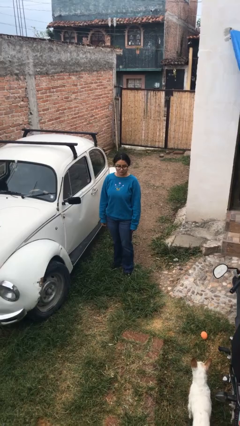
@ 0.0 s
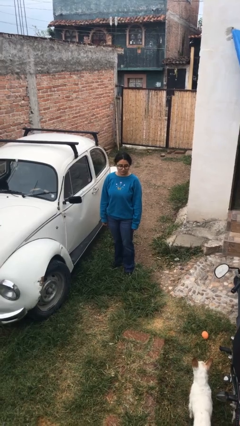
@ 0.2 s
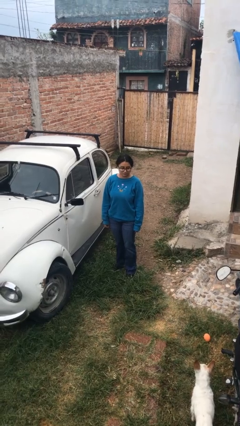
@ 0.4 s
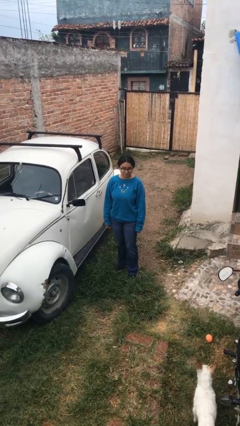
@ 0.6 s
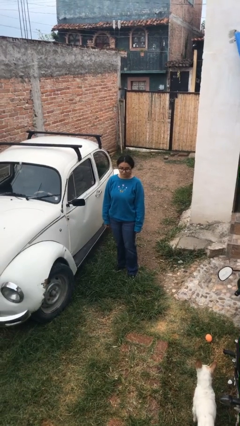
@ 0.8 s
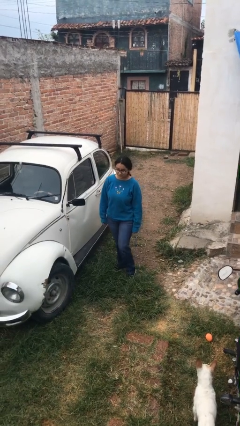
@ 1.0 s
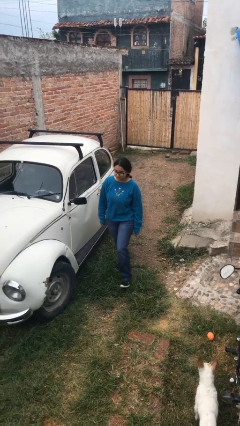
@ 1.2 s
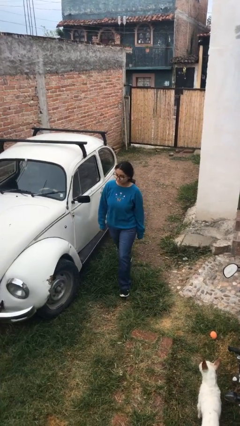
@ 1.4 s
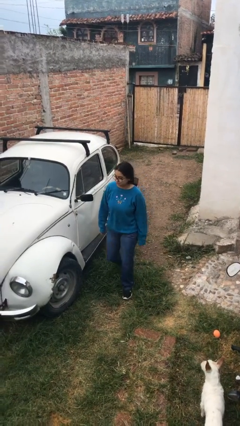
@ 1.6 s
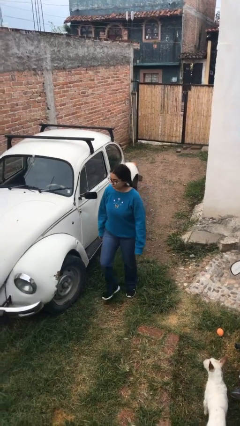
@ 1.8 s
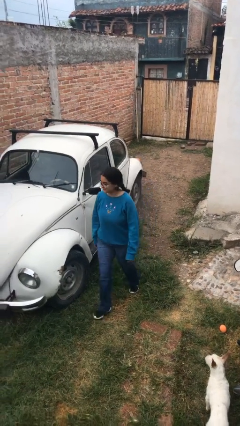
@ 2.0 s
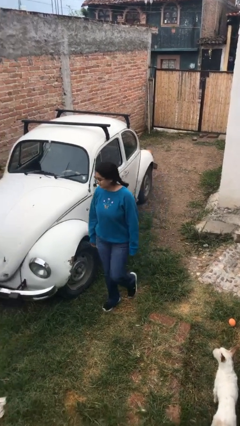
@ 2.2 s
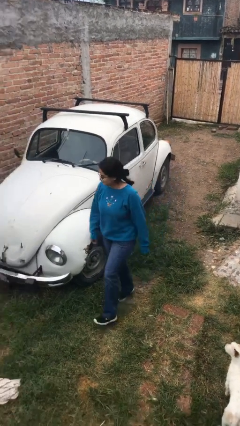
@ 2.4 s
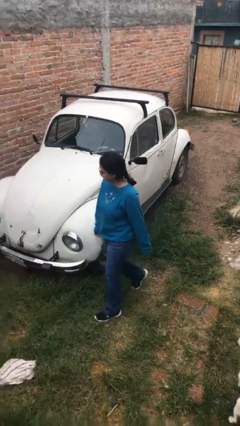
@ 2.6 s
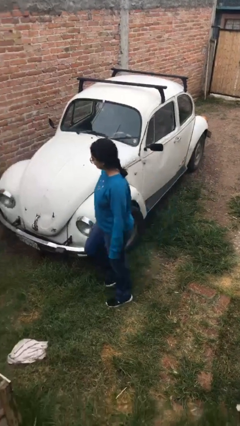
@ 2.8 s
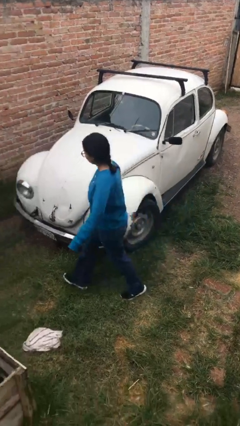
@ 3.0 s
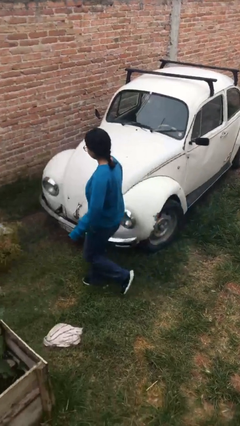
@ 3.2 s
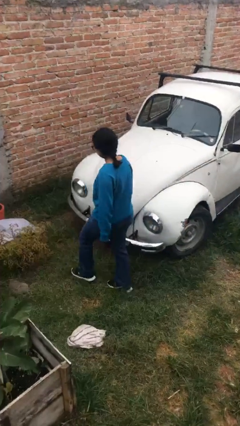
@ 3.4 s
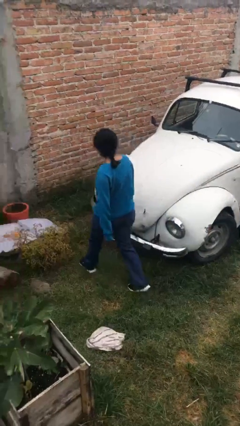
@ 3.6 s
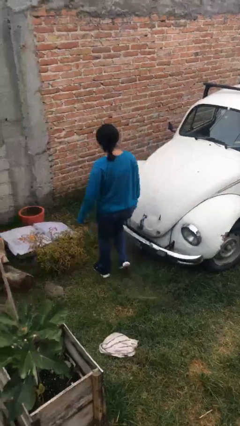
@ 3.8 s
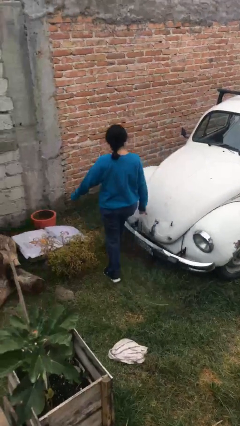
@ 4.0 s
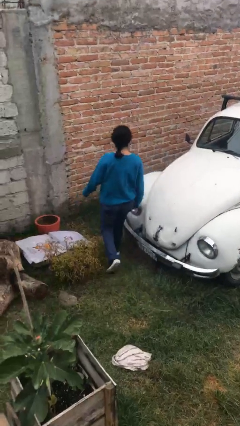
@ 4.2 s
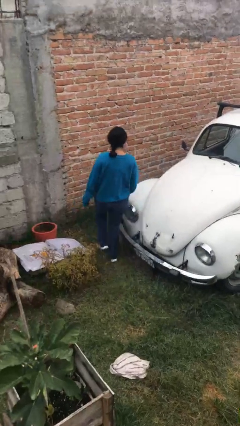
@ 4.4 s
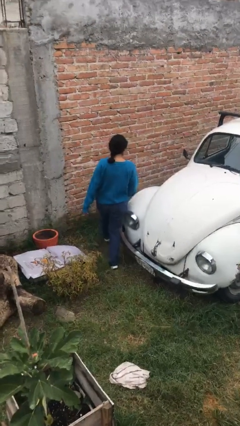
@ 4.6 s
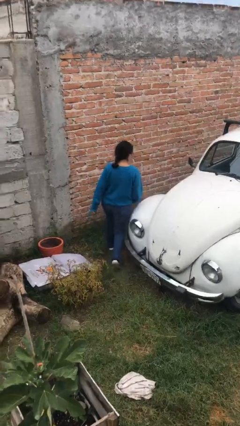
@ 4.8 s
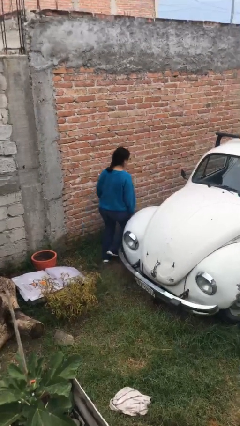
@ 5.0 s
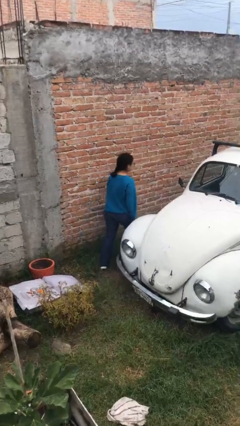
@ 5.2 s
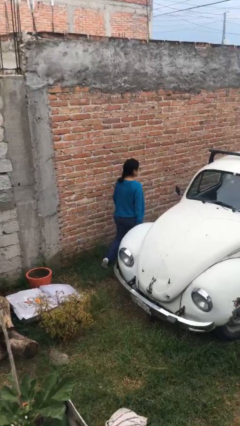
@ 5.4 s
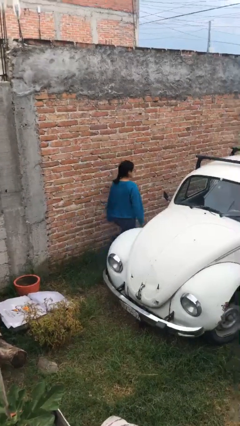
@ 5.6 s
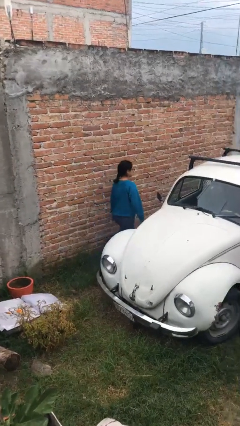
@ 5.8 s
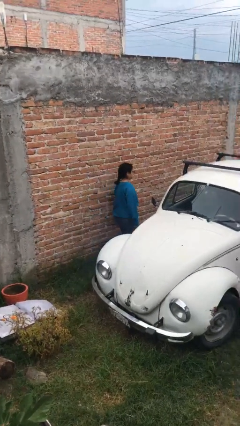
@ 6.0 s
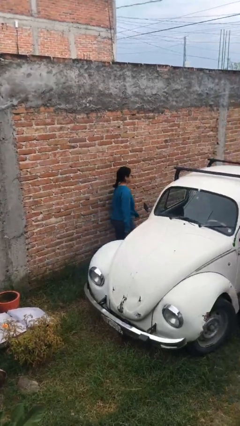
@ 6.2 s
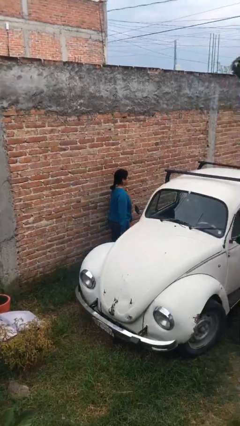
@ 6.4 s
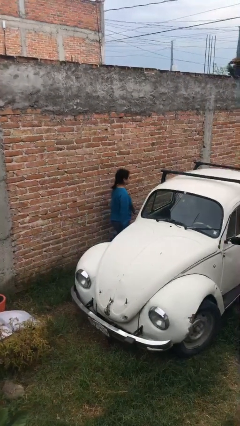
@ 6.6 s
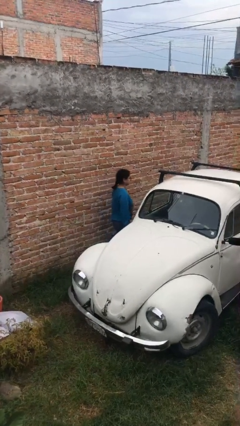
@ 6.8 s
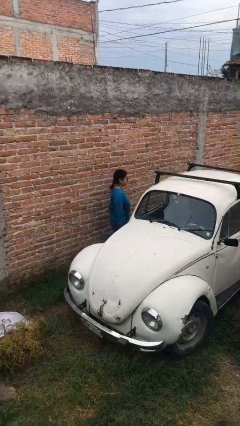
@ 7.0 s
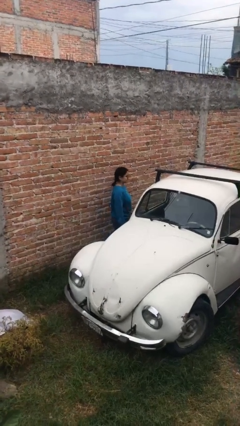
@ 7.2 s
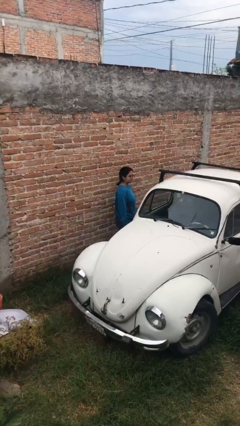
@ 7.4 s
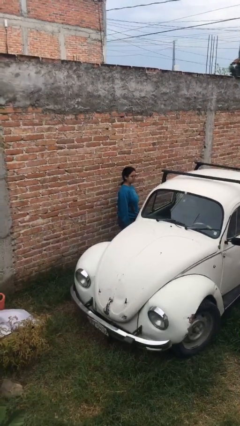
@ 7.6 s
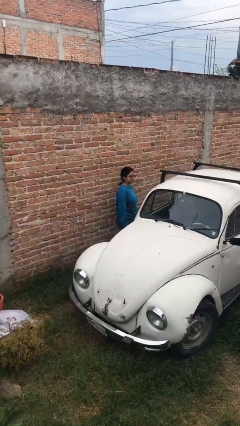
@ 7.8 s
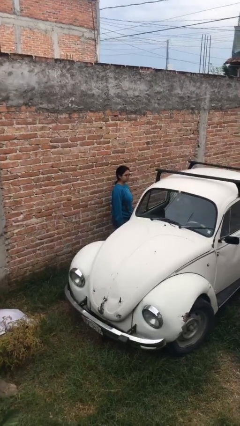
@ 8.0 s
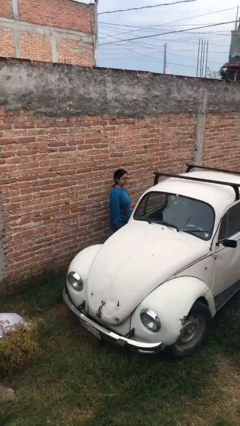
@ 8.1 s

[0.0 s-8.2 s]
person walks around car

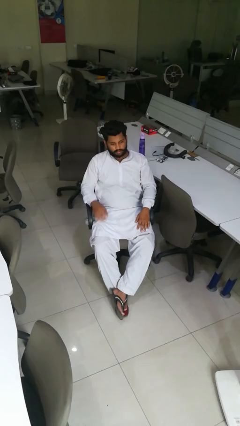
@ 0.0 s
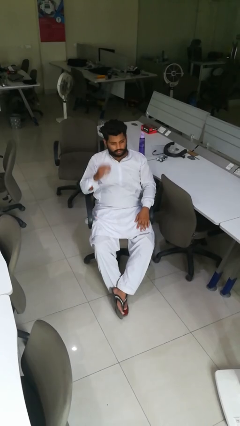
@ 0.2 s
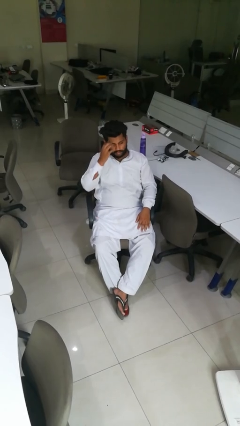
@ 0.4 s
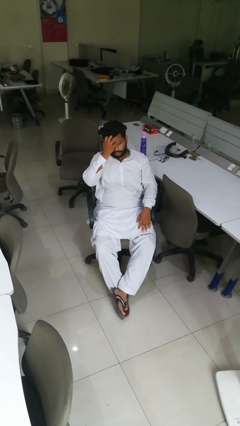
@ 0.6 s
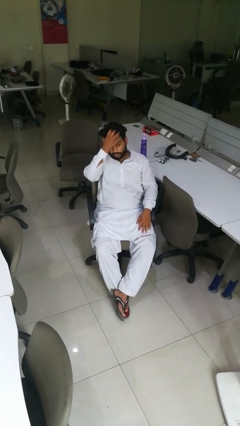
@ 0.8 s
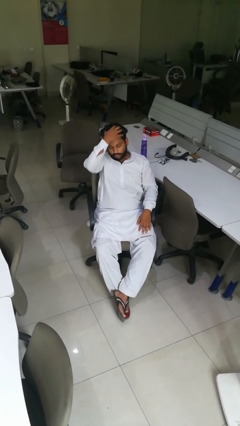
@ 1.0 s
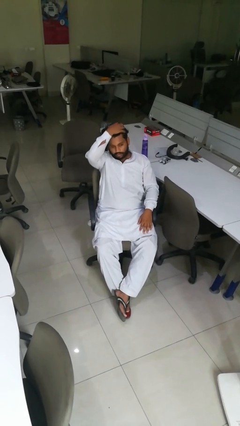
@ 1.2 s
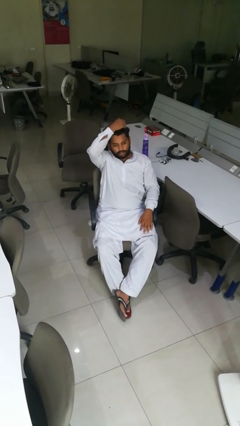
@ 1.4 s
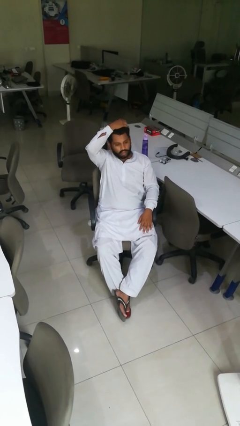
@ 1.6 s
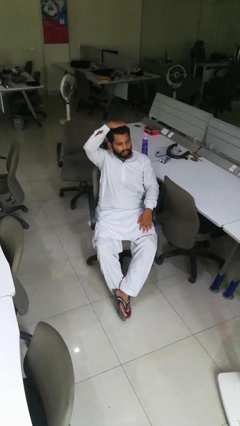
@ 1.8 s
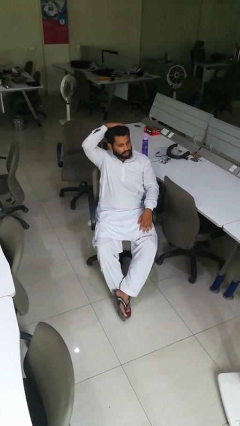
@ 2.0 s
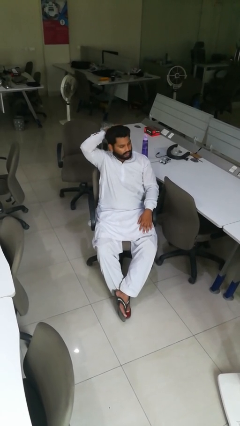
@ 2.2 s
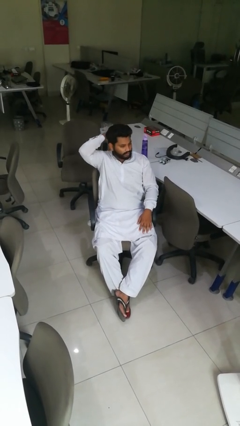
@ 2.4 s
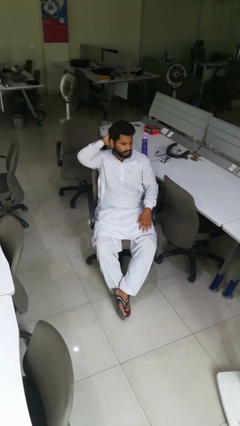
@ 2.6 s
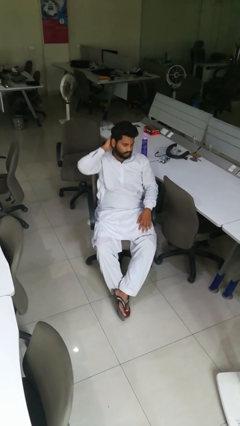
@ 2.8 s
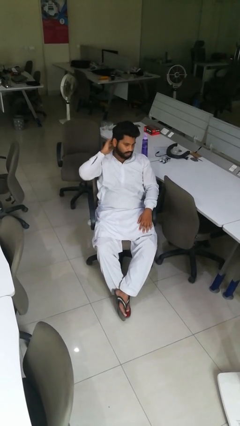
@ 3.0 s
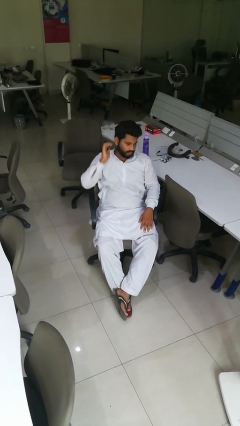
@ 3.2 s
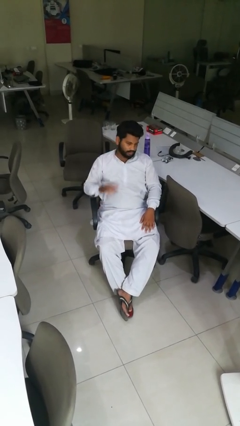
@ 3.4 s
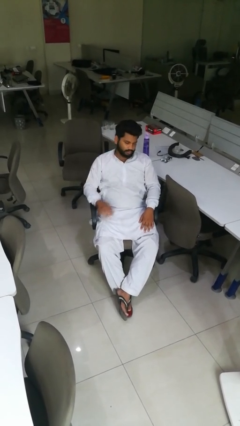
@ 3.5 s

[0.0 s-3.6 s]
person strokes hair

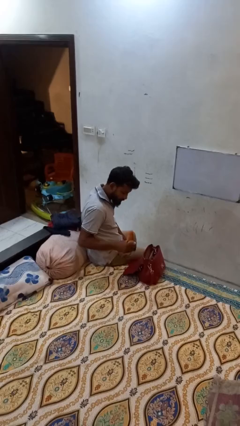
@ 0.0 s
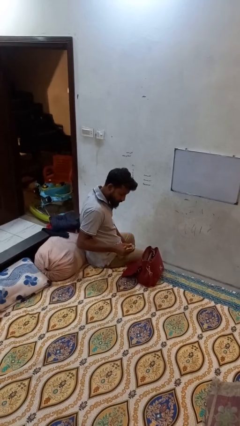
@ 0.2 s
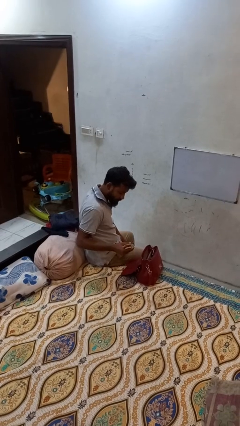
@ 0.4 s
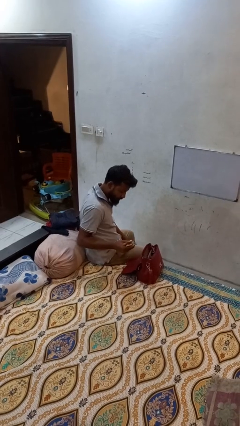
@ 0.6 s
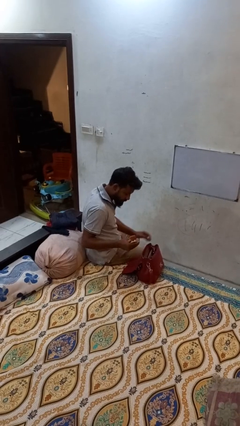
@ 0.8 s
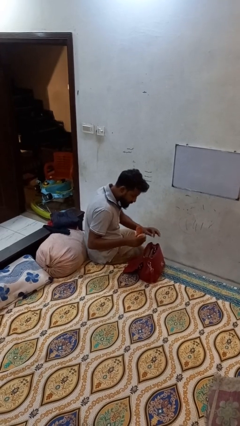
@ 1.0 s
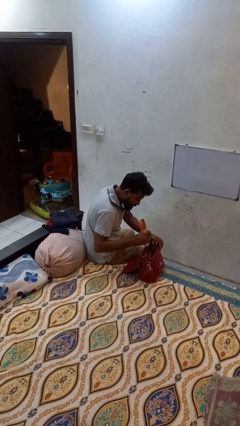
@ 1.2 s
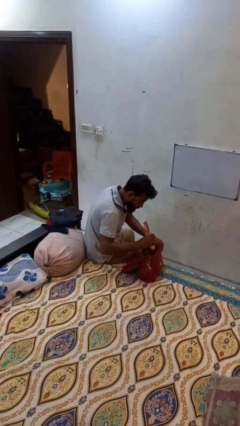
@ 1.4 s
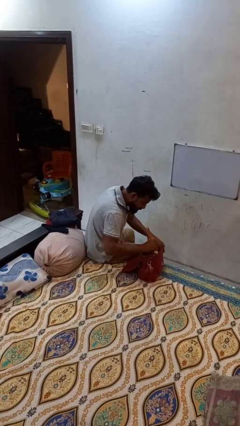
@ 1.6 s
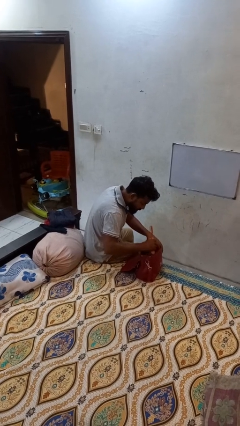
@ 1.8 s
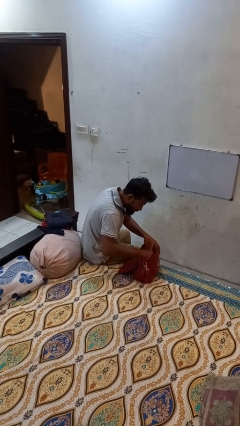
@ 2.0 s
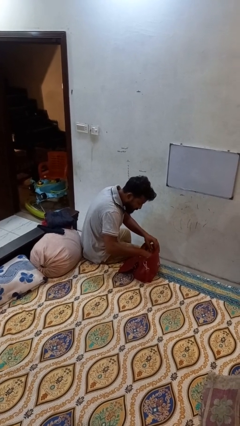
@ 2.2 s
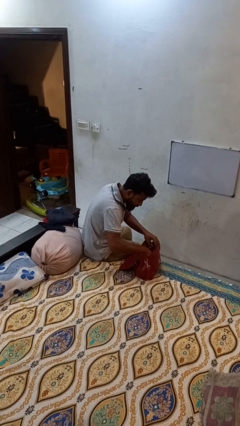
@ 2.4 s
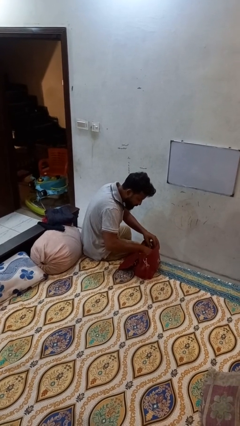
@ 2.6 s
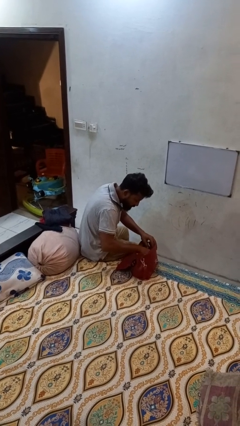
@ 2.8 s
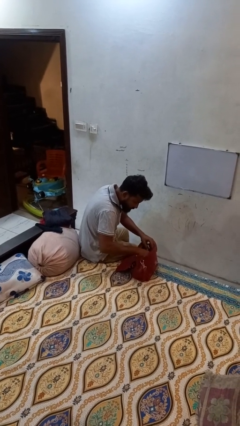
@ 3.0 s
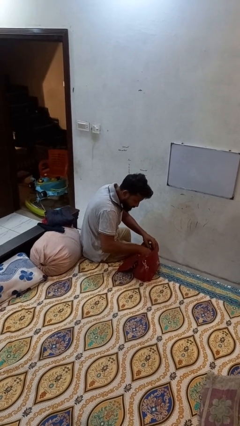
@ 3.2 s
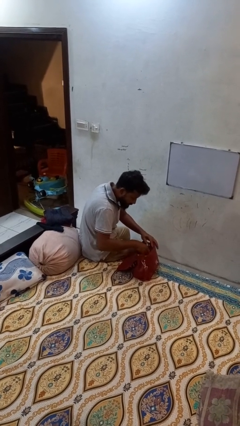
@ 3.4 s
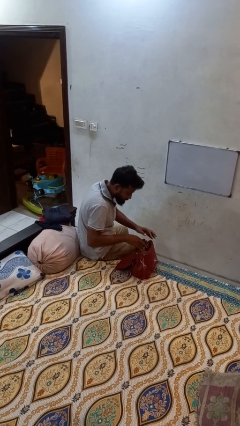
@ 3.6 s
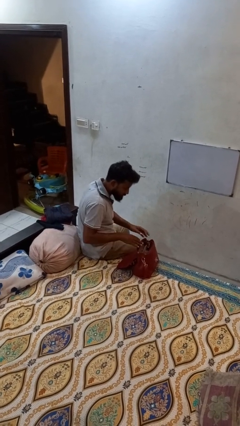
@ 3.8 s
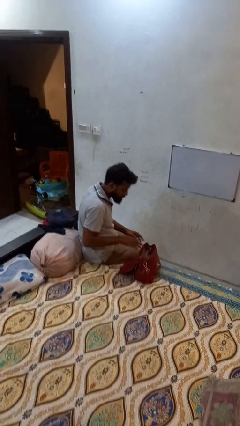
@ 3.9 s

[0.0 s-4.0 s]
person puts object into purse

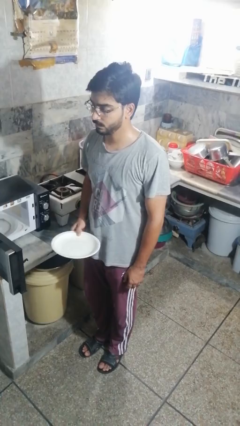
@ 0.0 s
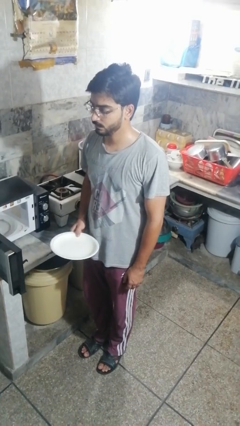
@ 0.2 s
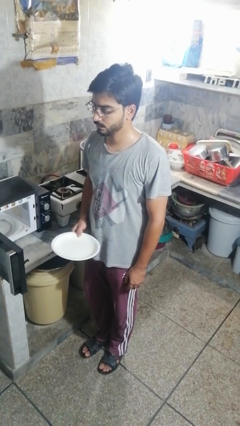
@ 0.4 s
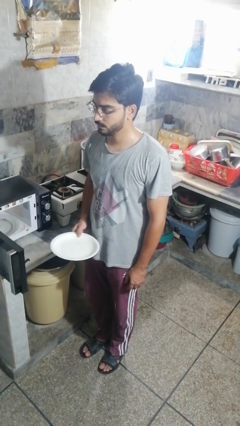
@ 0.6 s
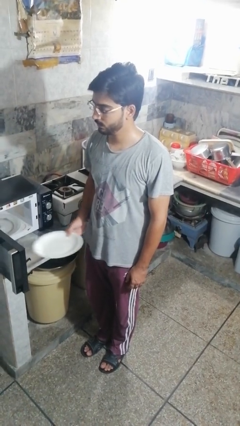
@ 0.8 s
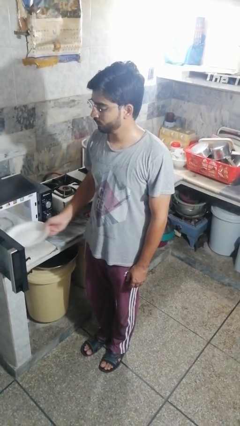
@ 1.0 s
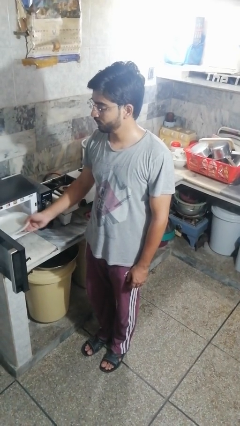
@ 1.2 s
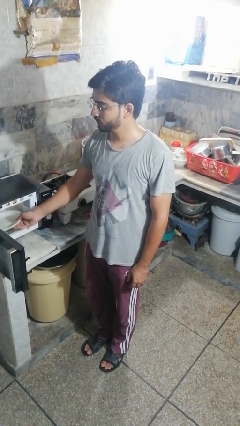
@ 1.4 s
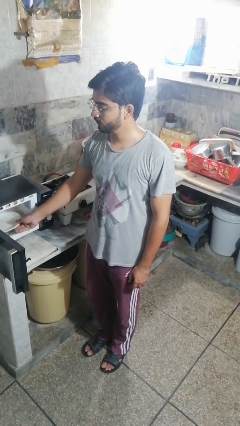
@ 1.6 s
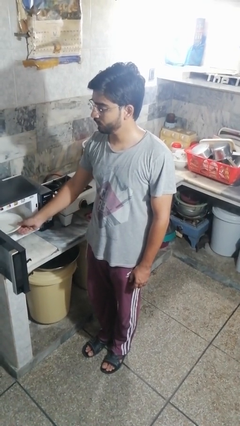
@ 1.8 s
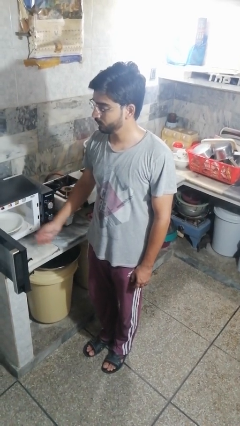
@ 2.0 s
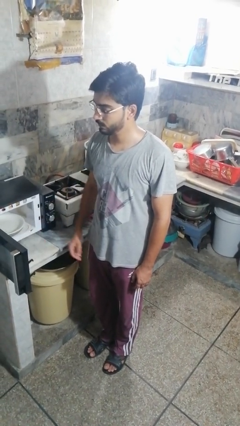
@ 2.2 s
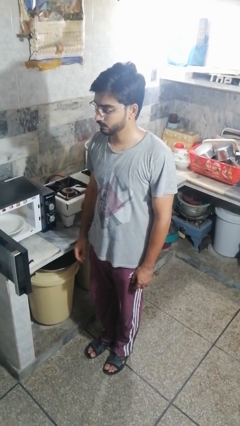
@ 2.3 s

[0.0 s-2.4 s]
person puts object into oven
